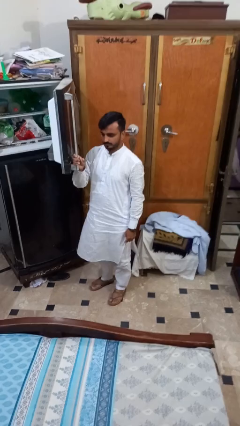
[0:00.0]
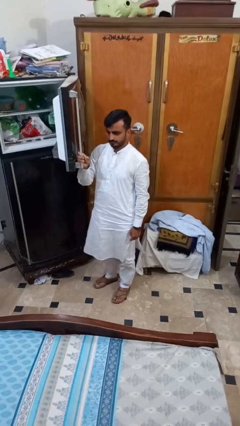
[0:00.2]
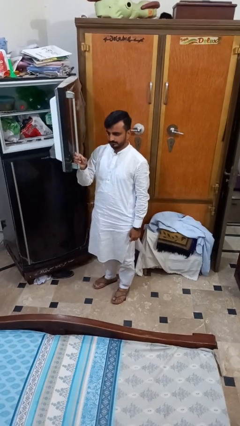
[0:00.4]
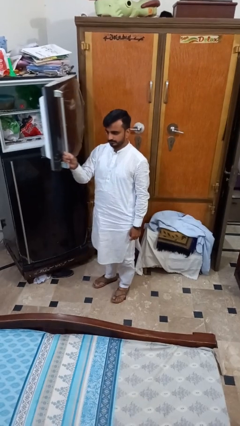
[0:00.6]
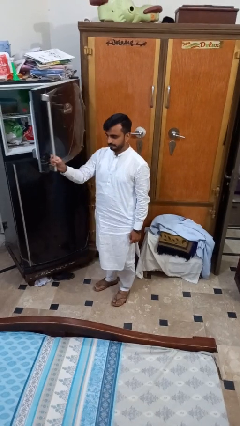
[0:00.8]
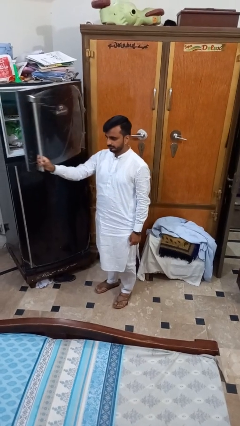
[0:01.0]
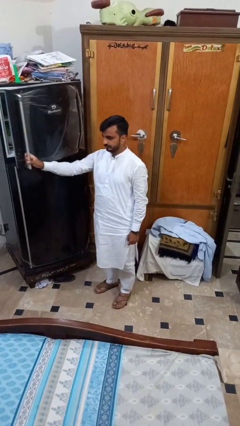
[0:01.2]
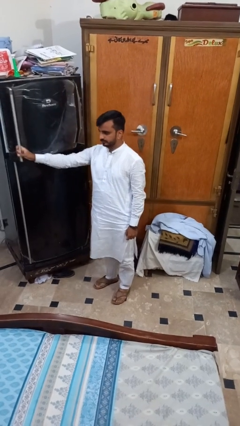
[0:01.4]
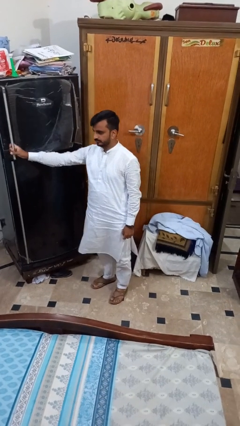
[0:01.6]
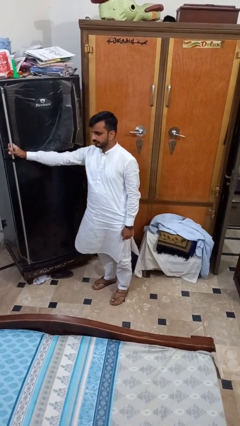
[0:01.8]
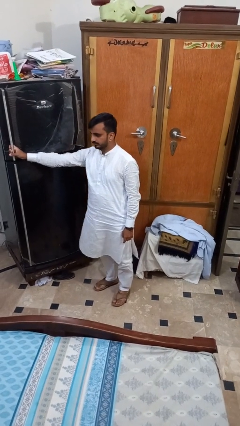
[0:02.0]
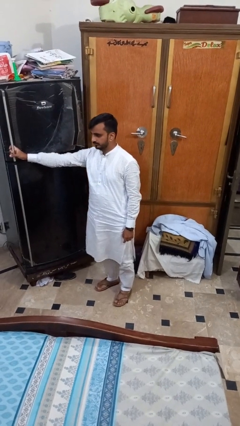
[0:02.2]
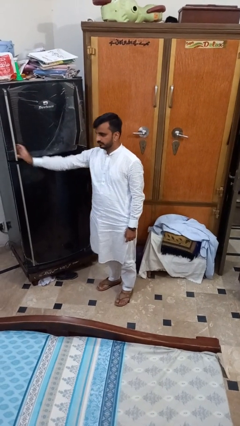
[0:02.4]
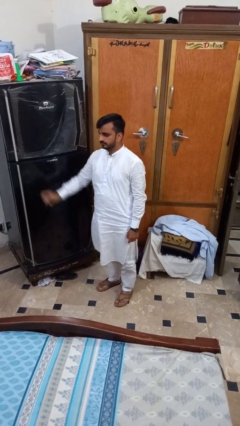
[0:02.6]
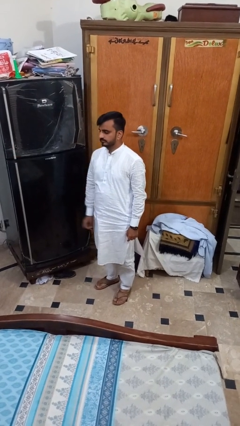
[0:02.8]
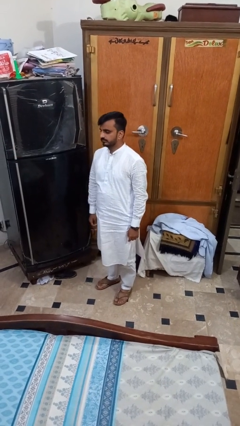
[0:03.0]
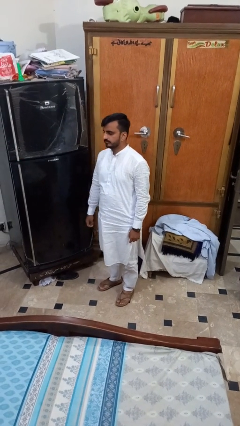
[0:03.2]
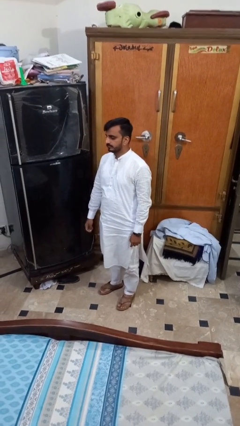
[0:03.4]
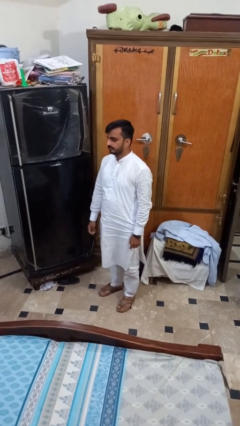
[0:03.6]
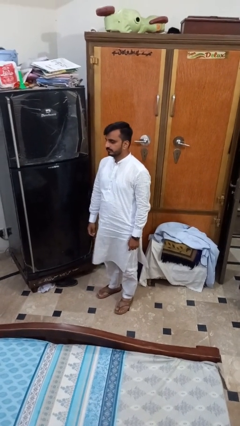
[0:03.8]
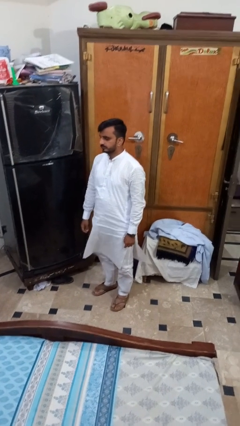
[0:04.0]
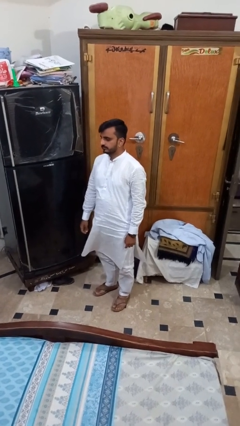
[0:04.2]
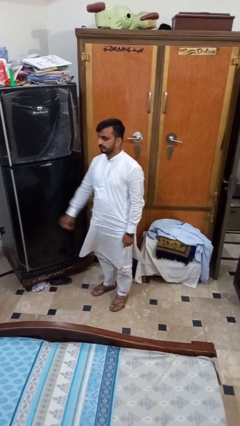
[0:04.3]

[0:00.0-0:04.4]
person closes refrigerator

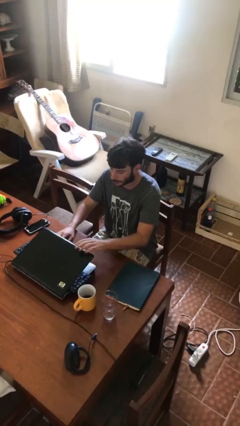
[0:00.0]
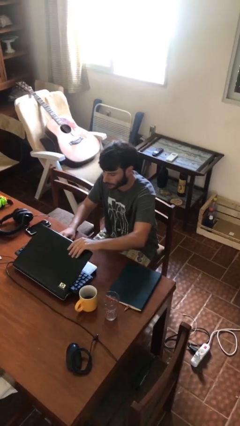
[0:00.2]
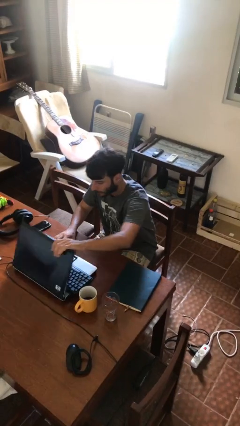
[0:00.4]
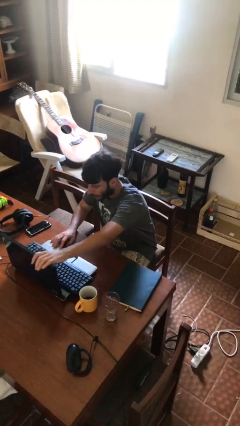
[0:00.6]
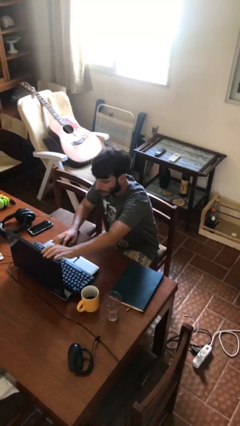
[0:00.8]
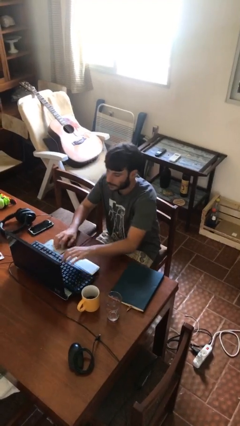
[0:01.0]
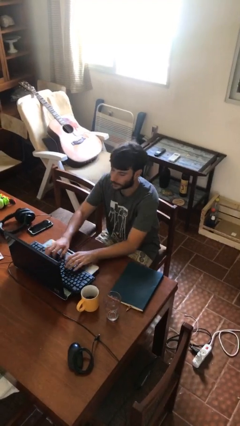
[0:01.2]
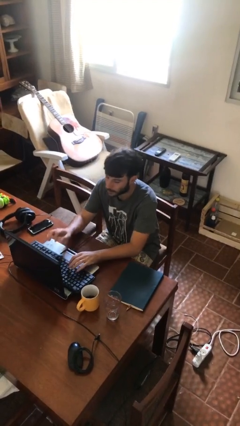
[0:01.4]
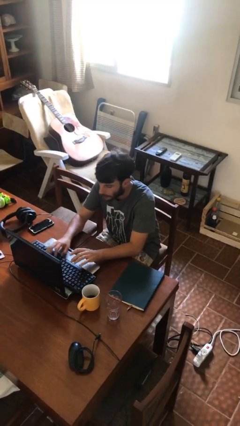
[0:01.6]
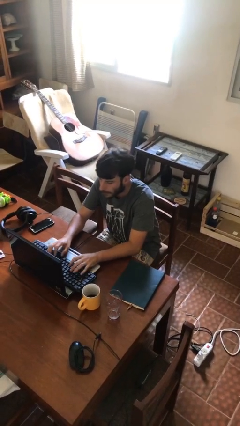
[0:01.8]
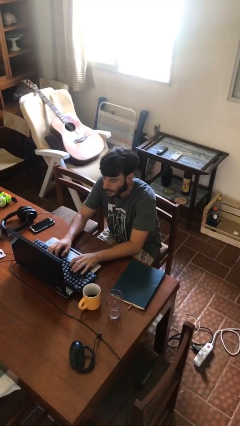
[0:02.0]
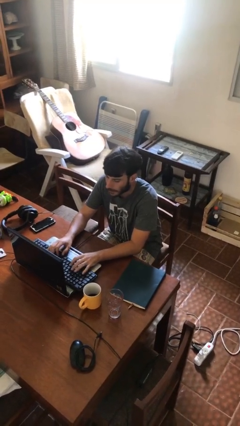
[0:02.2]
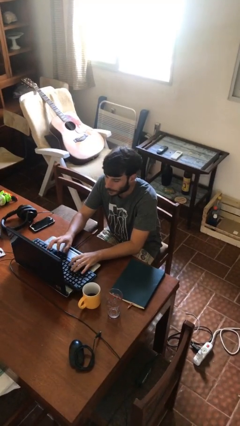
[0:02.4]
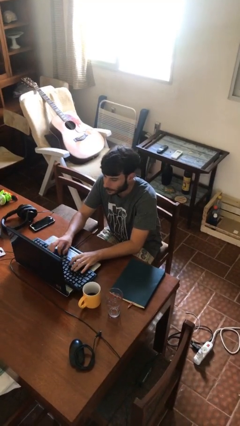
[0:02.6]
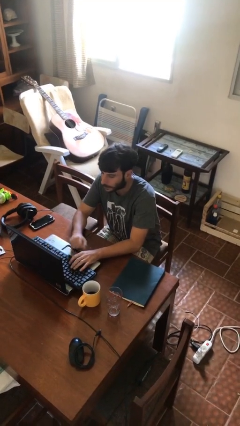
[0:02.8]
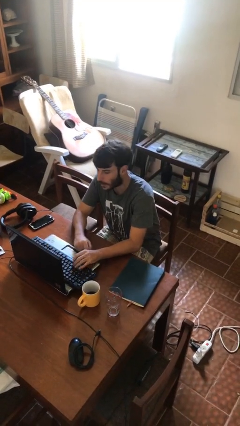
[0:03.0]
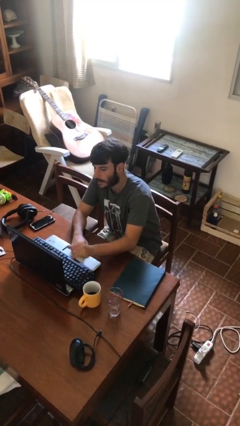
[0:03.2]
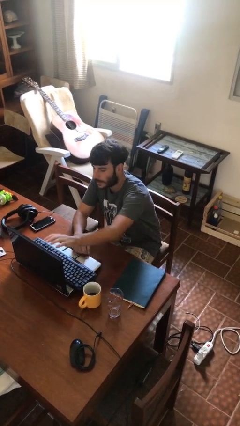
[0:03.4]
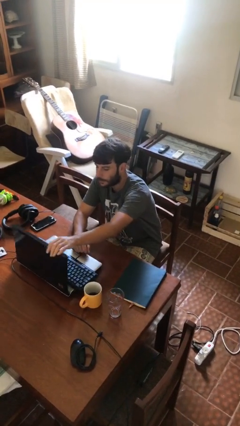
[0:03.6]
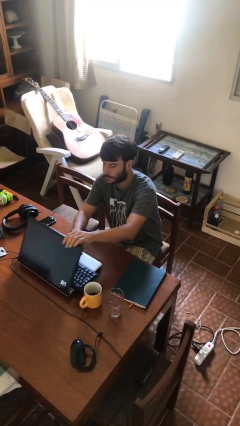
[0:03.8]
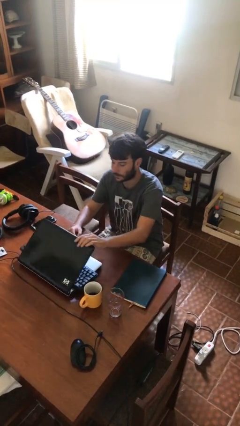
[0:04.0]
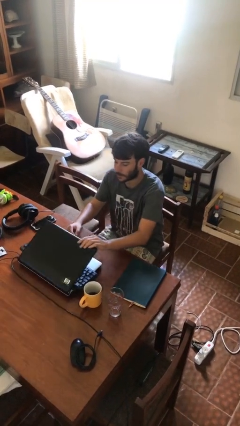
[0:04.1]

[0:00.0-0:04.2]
person interacts with laptop

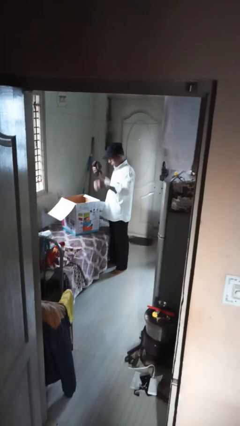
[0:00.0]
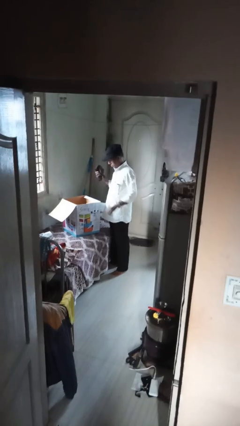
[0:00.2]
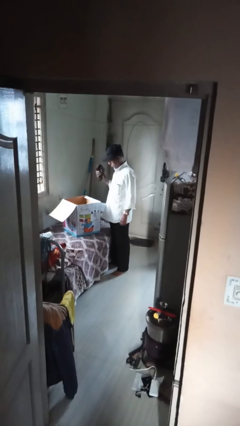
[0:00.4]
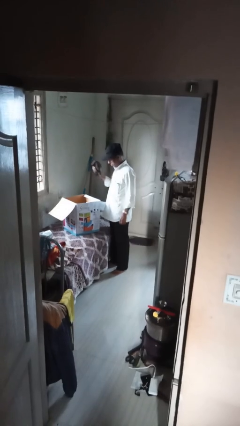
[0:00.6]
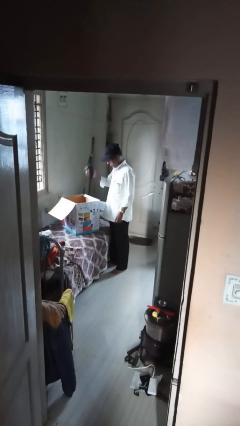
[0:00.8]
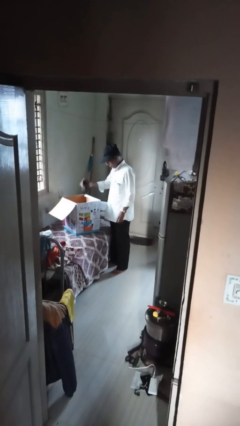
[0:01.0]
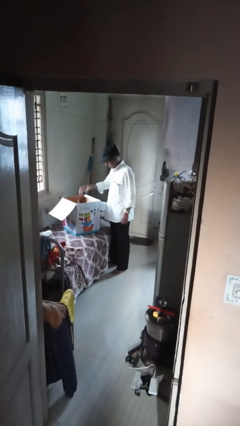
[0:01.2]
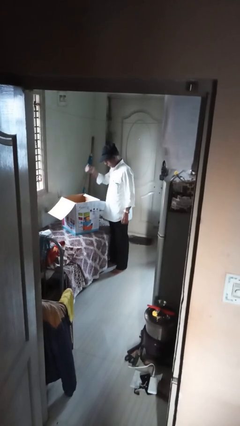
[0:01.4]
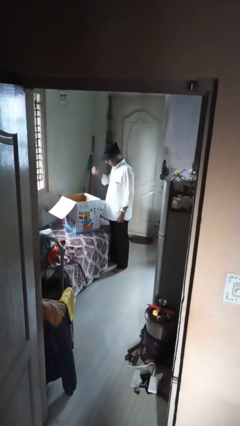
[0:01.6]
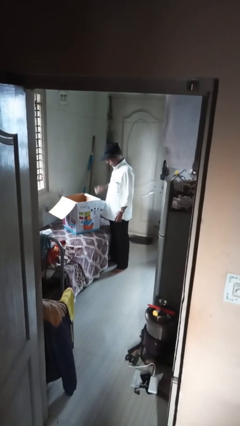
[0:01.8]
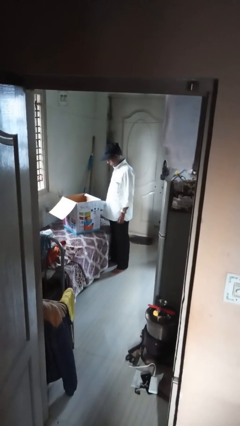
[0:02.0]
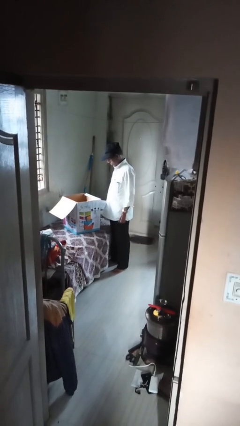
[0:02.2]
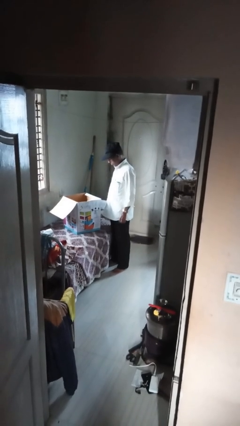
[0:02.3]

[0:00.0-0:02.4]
person puts object into box

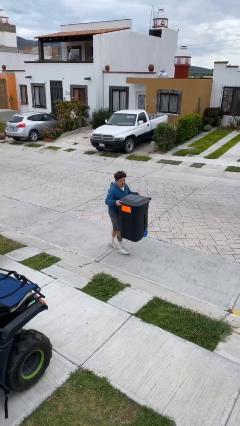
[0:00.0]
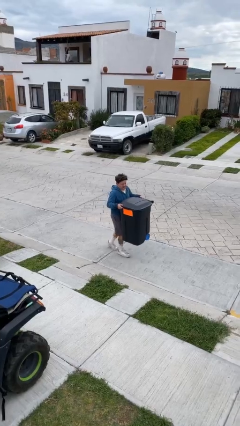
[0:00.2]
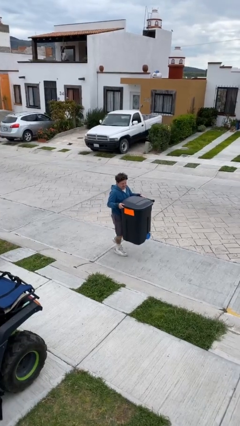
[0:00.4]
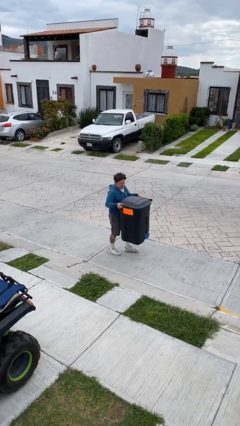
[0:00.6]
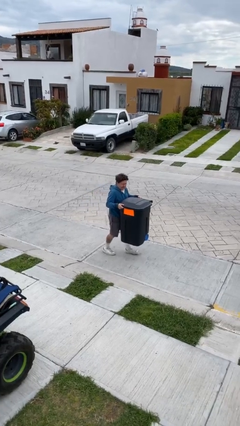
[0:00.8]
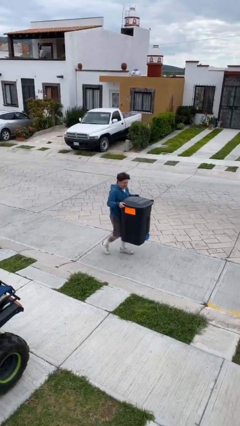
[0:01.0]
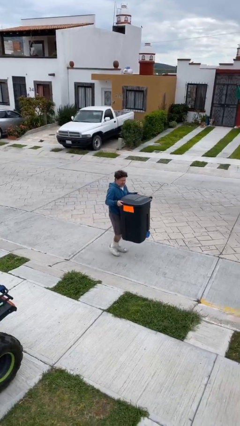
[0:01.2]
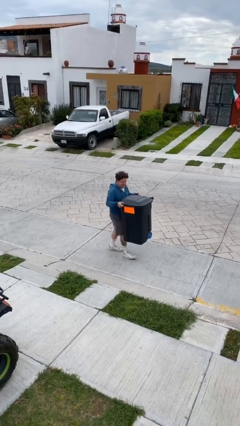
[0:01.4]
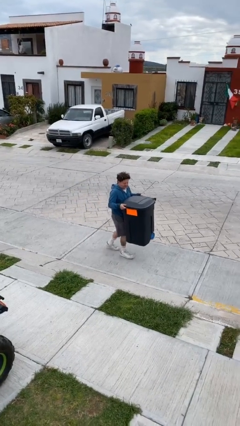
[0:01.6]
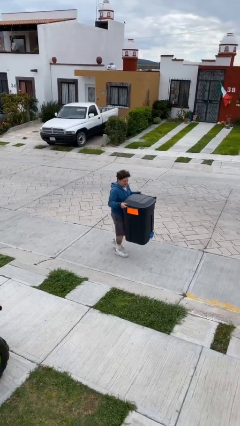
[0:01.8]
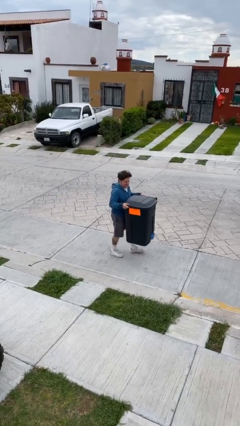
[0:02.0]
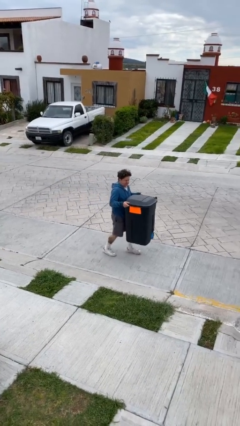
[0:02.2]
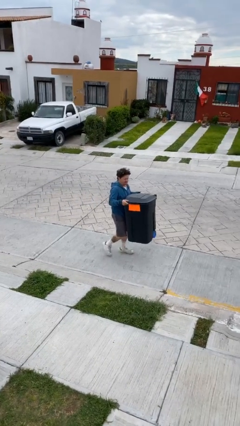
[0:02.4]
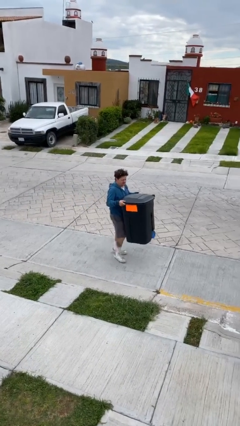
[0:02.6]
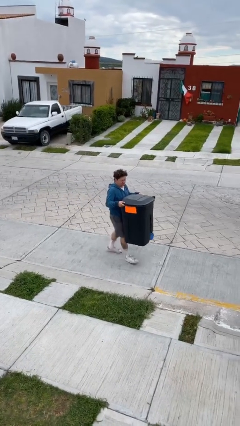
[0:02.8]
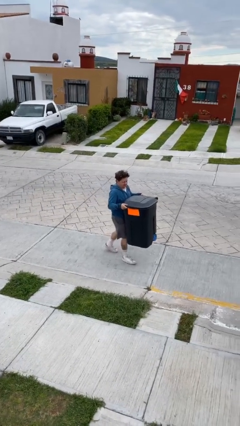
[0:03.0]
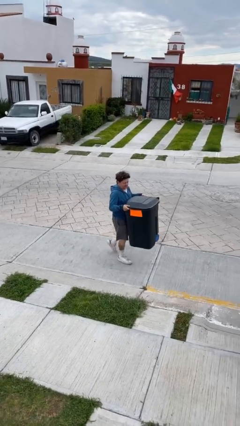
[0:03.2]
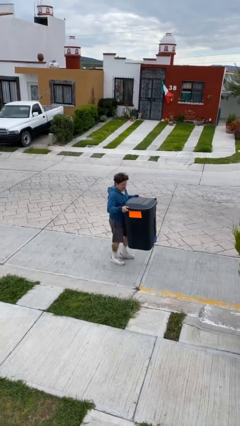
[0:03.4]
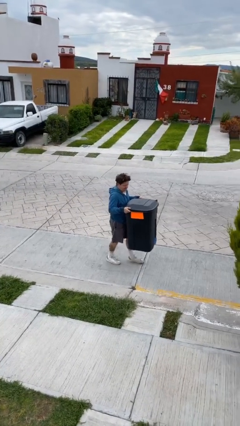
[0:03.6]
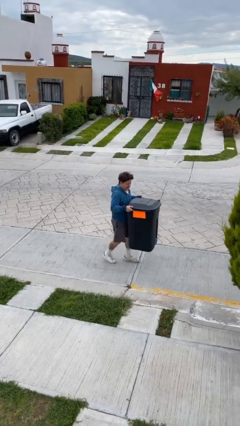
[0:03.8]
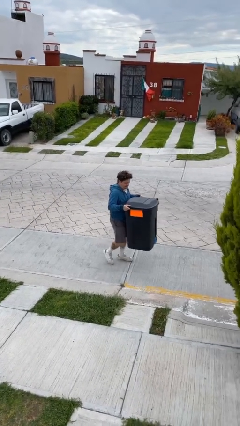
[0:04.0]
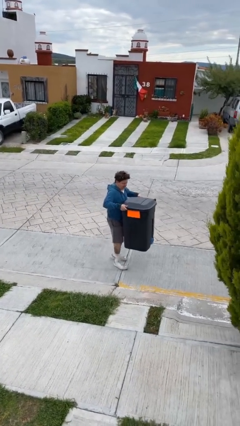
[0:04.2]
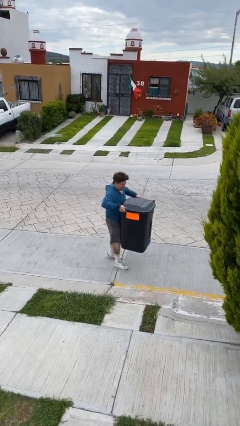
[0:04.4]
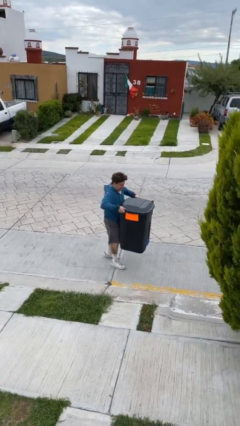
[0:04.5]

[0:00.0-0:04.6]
person carries heavy object

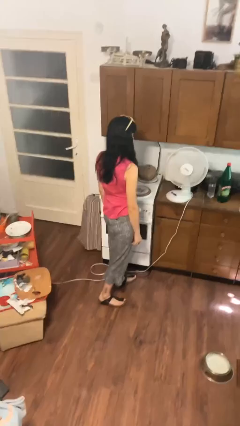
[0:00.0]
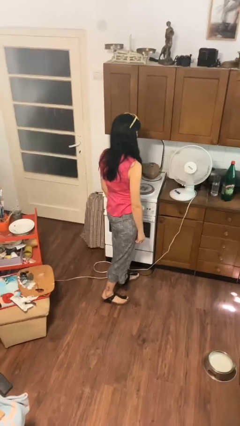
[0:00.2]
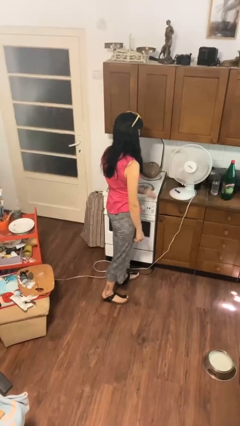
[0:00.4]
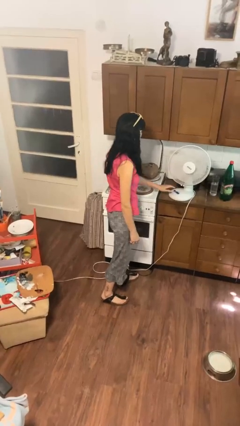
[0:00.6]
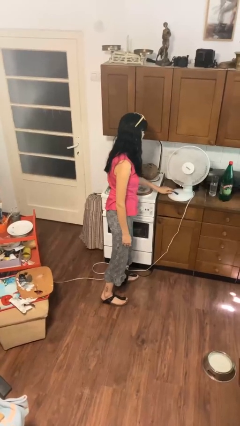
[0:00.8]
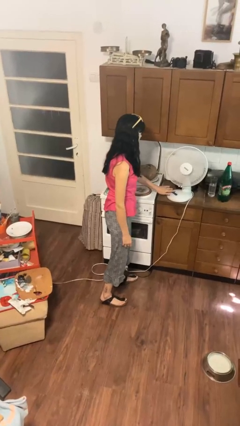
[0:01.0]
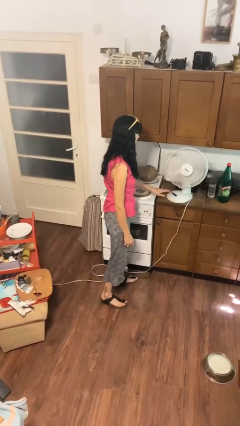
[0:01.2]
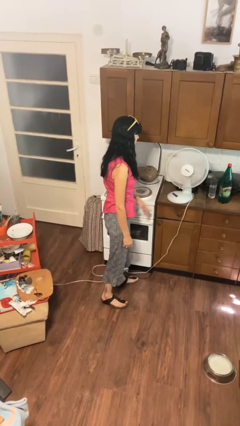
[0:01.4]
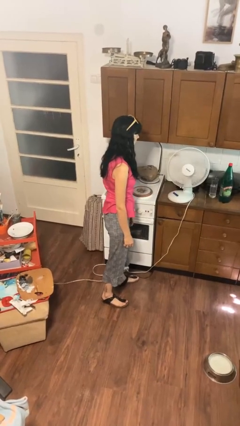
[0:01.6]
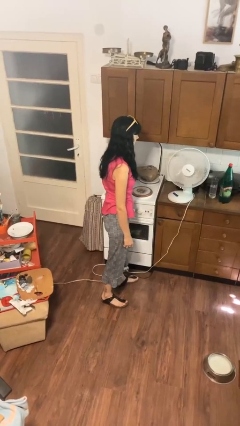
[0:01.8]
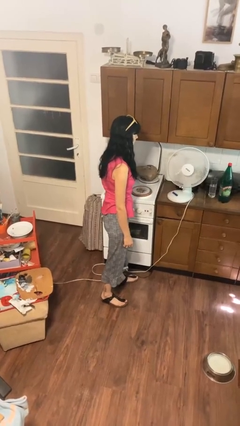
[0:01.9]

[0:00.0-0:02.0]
person turns off fan

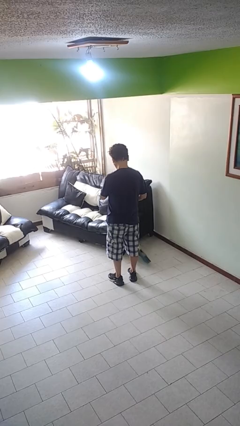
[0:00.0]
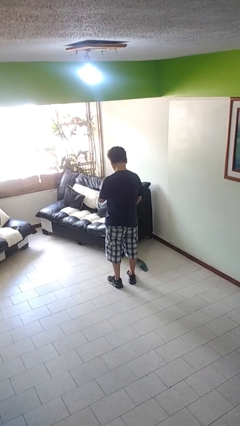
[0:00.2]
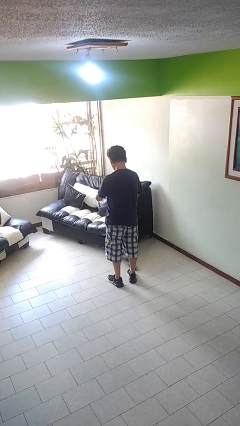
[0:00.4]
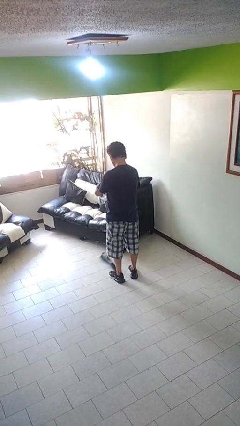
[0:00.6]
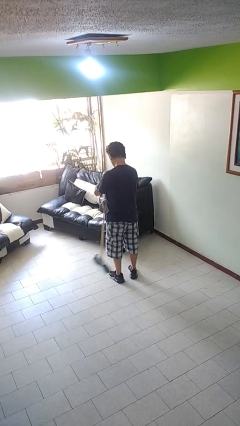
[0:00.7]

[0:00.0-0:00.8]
person sweeps floor
